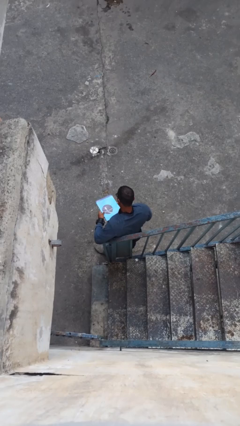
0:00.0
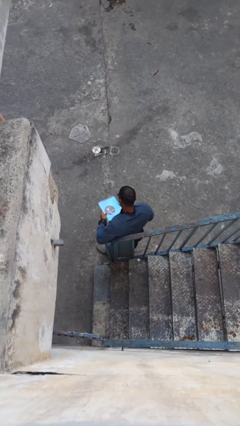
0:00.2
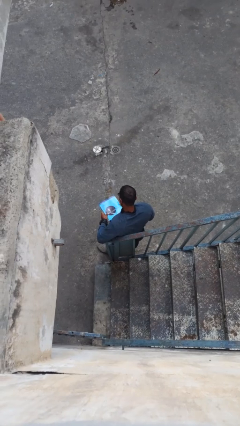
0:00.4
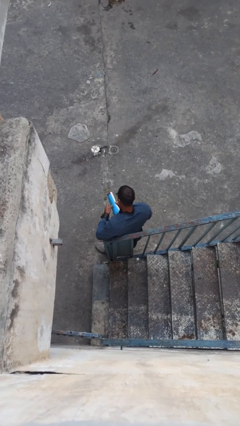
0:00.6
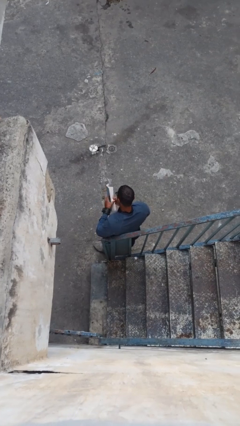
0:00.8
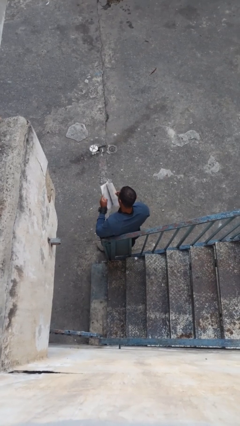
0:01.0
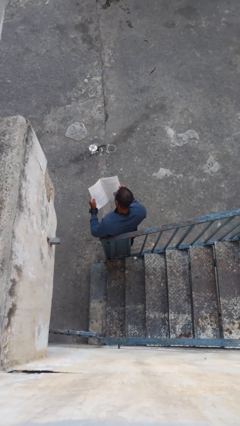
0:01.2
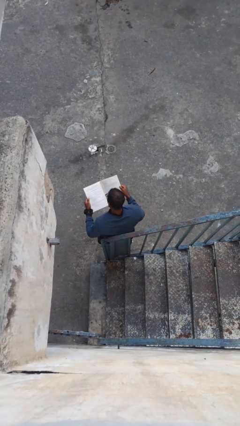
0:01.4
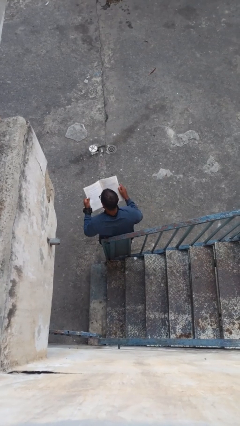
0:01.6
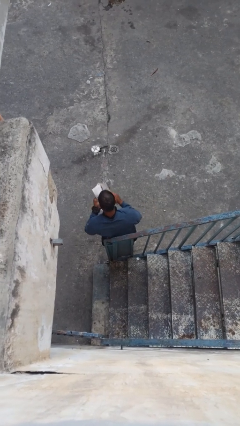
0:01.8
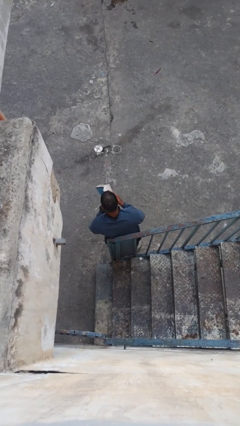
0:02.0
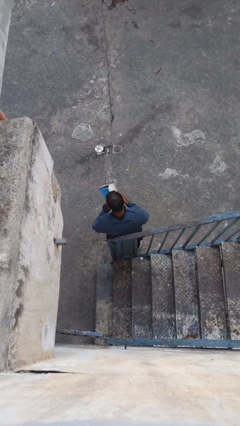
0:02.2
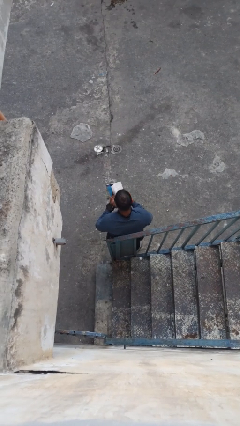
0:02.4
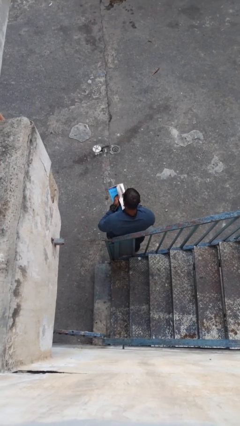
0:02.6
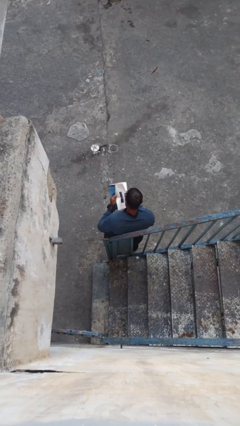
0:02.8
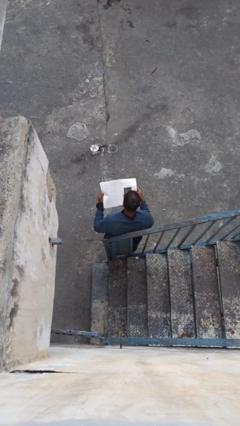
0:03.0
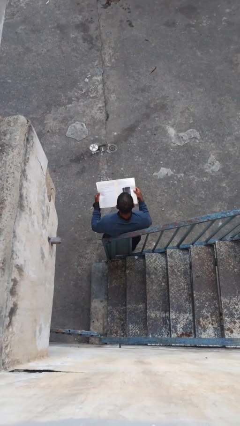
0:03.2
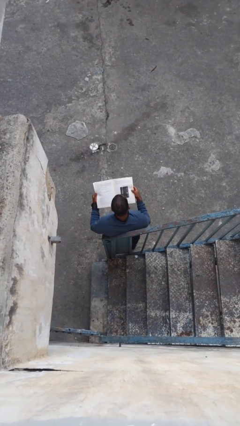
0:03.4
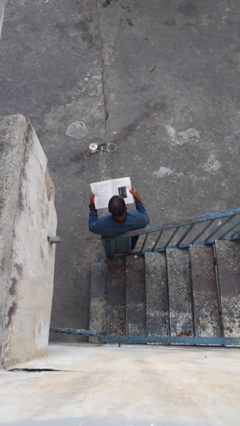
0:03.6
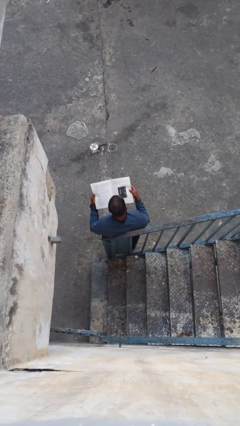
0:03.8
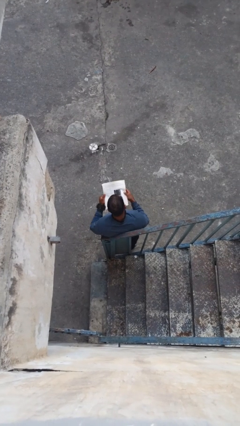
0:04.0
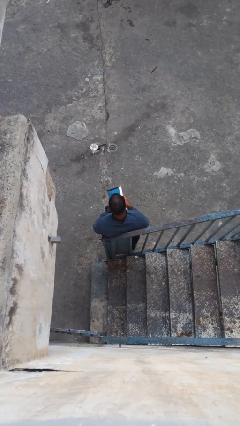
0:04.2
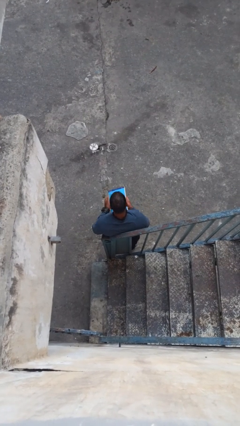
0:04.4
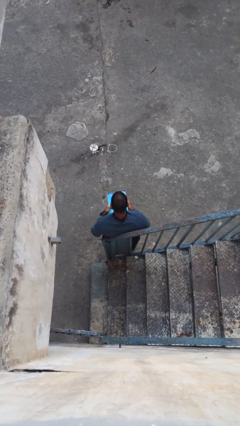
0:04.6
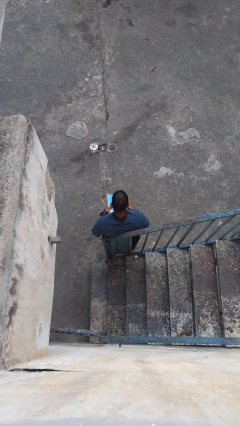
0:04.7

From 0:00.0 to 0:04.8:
person reads document

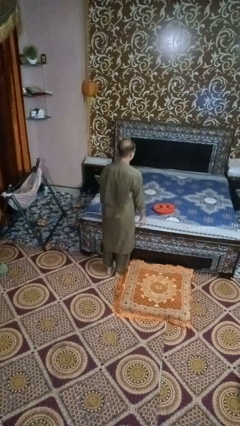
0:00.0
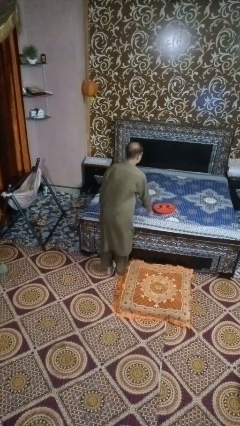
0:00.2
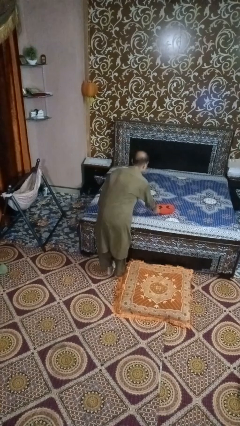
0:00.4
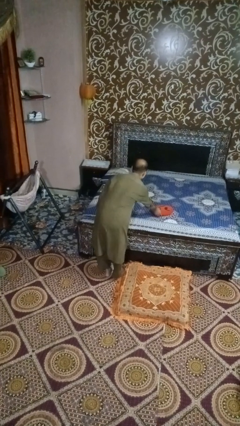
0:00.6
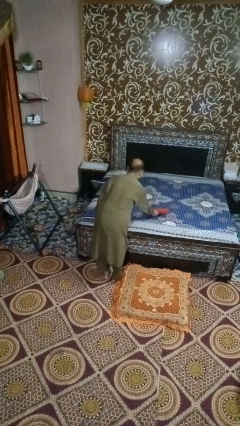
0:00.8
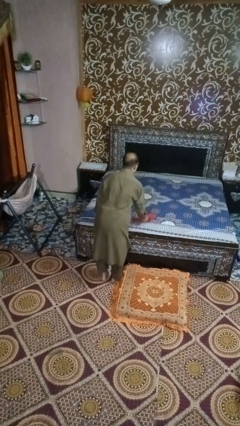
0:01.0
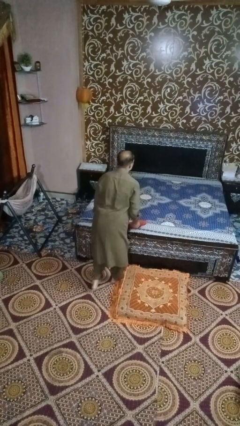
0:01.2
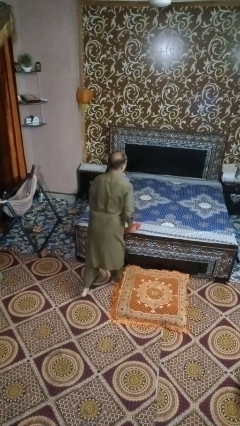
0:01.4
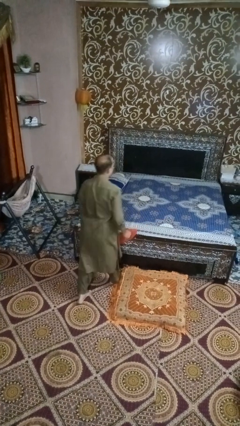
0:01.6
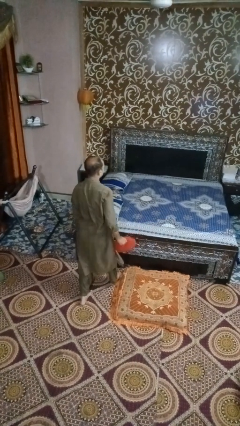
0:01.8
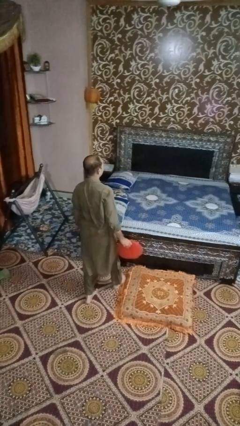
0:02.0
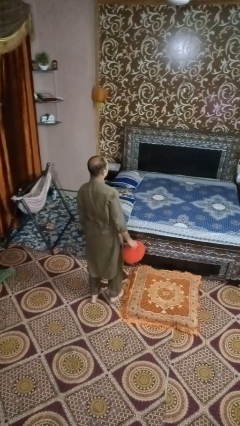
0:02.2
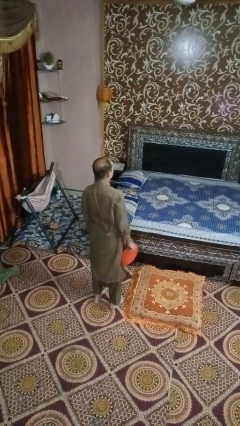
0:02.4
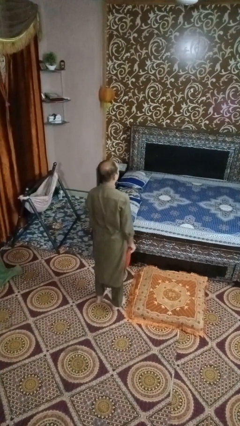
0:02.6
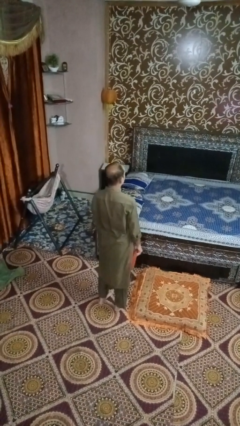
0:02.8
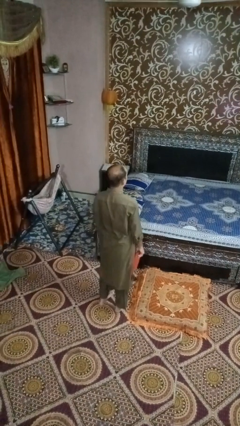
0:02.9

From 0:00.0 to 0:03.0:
person picks up object from bed

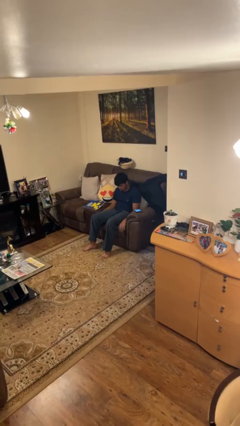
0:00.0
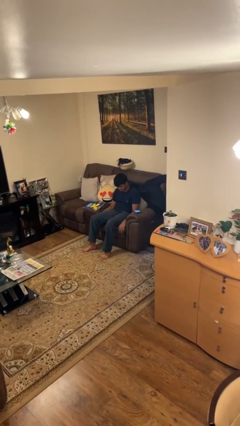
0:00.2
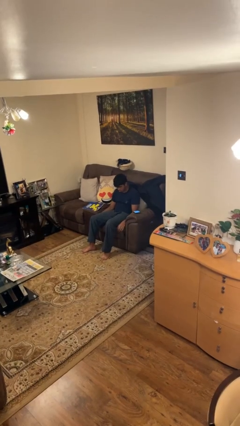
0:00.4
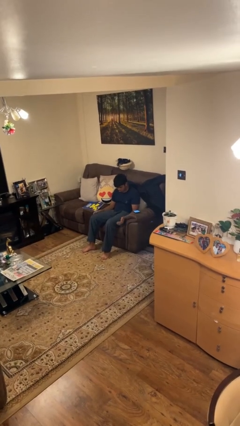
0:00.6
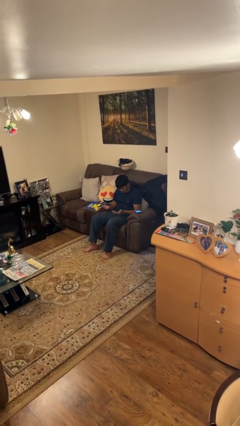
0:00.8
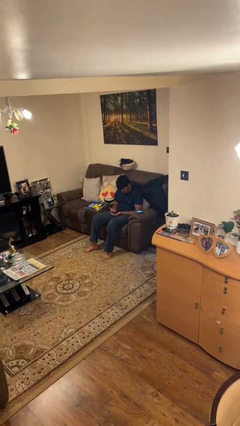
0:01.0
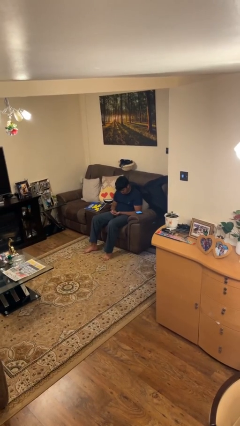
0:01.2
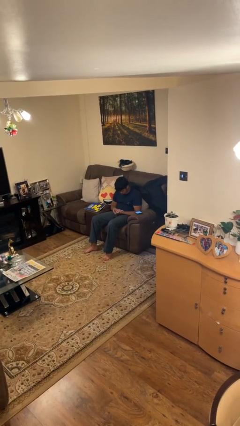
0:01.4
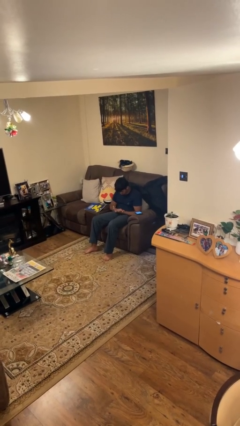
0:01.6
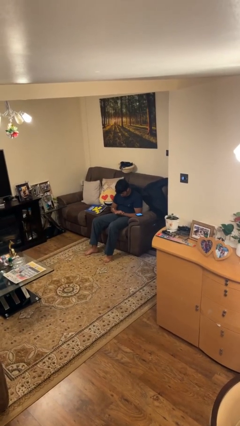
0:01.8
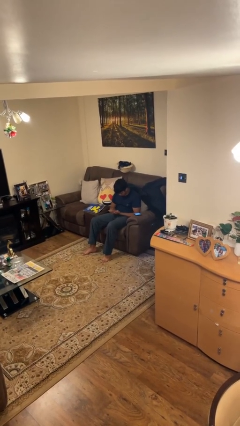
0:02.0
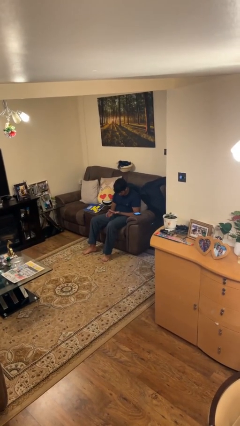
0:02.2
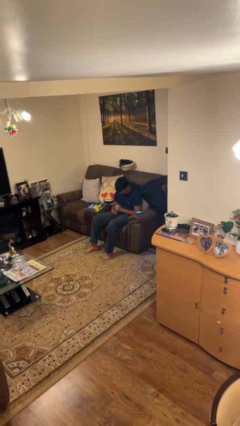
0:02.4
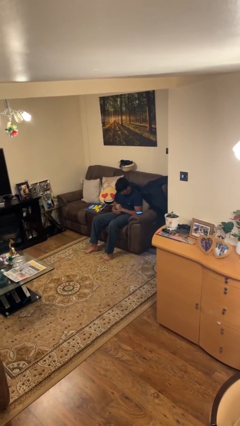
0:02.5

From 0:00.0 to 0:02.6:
person looks at hands in lap

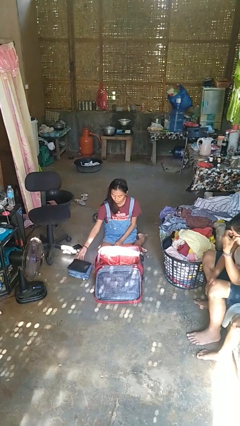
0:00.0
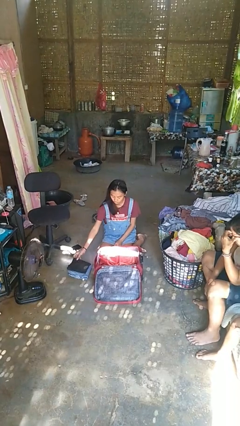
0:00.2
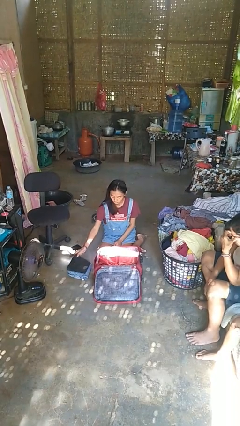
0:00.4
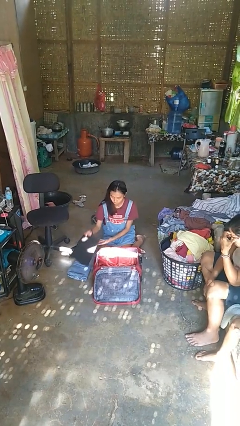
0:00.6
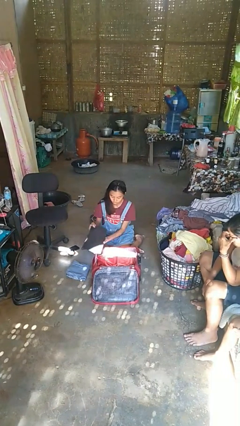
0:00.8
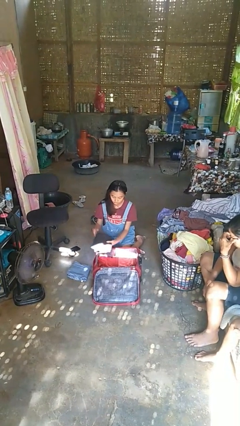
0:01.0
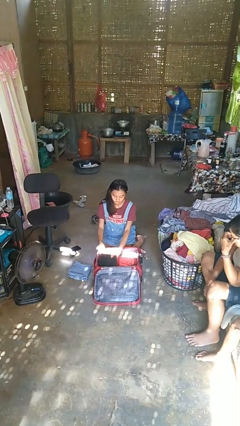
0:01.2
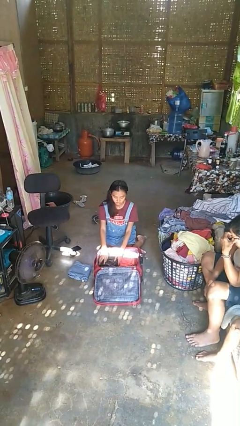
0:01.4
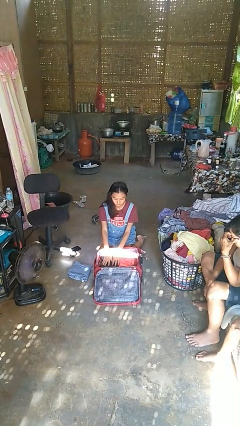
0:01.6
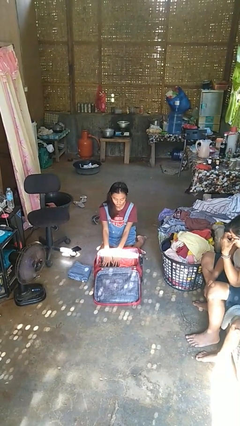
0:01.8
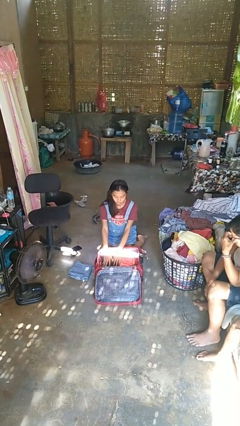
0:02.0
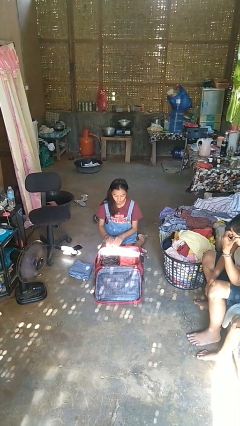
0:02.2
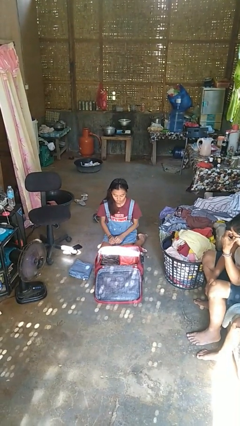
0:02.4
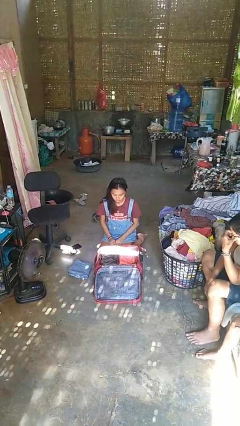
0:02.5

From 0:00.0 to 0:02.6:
person loads clothes into suitcase

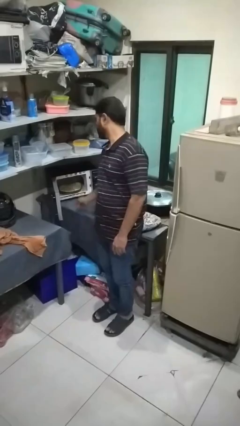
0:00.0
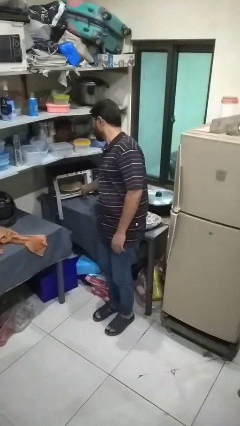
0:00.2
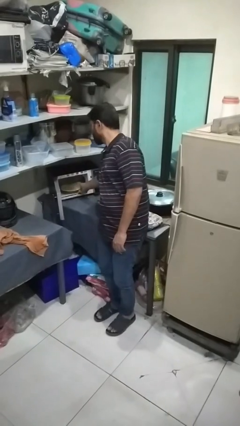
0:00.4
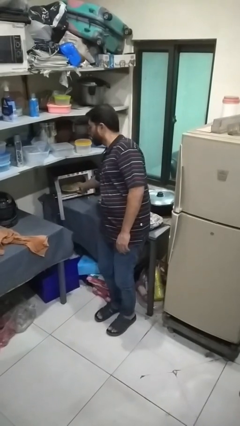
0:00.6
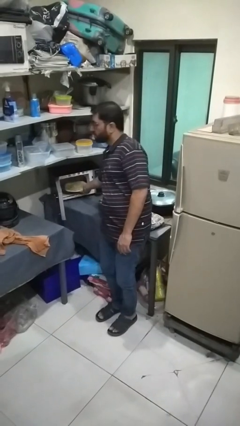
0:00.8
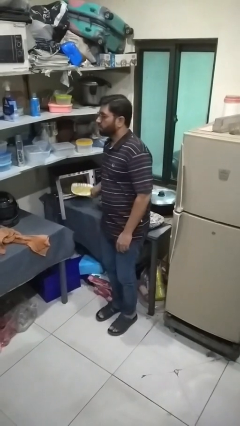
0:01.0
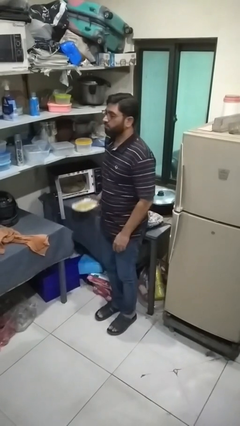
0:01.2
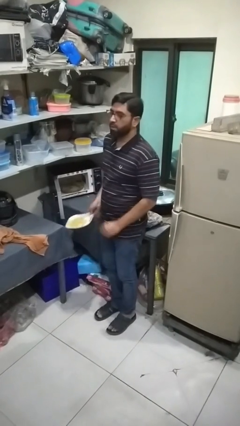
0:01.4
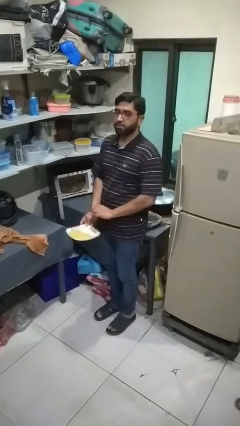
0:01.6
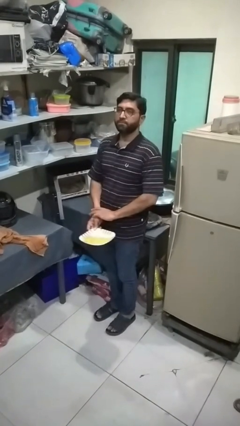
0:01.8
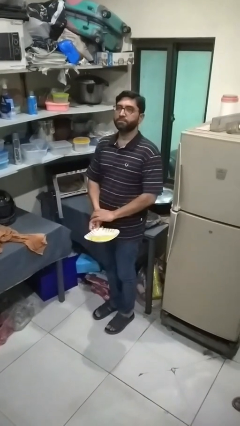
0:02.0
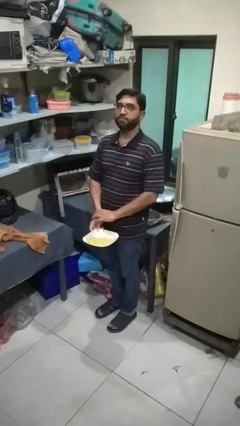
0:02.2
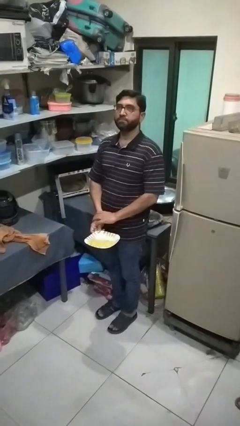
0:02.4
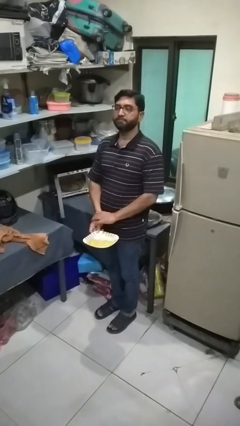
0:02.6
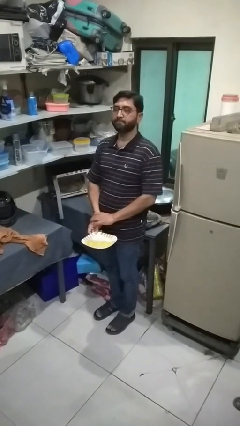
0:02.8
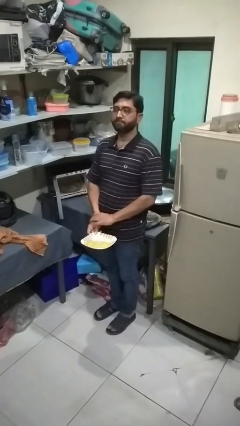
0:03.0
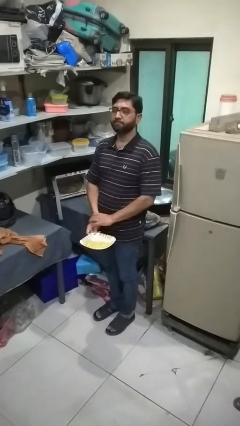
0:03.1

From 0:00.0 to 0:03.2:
person takes object from microwave

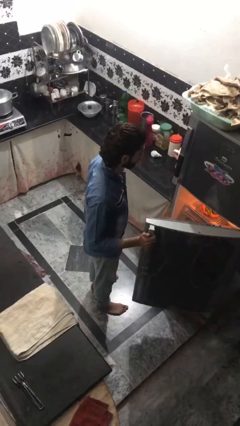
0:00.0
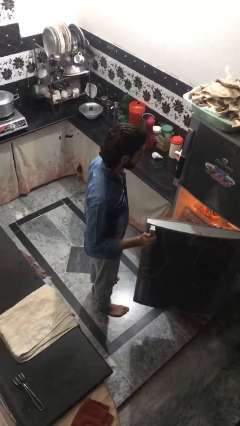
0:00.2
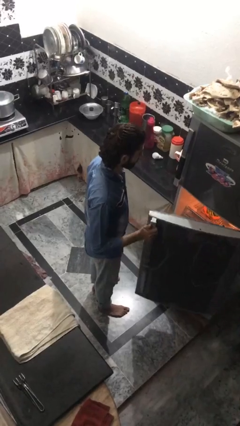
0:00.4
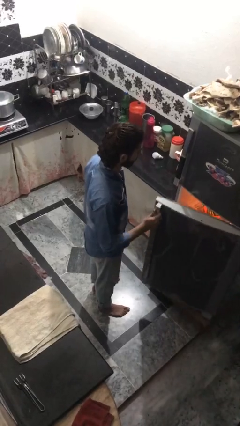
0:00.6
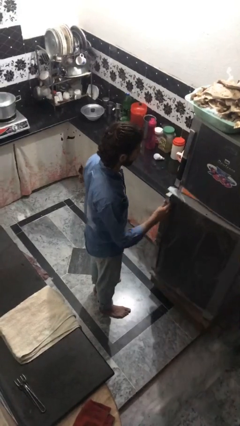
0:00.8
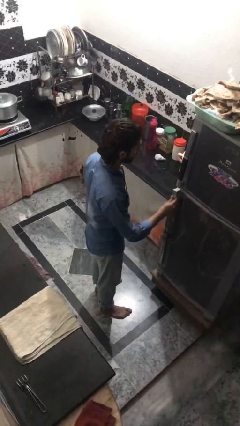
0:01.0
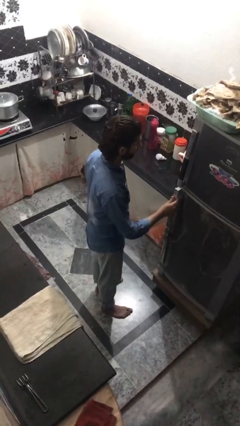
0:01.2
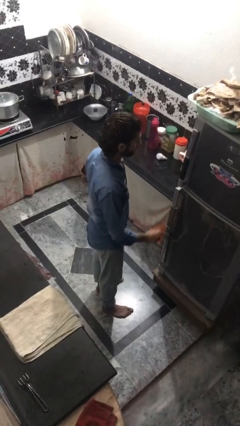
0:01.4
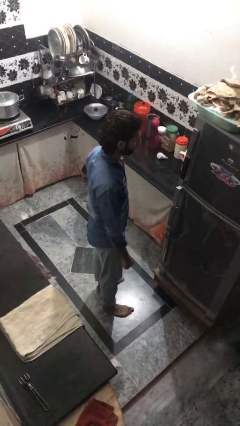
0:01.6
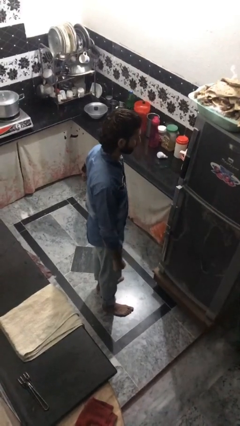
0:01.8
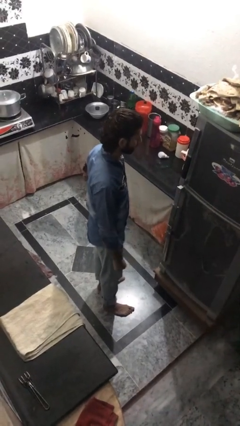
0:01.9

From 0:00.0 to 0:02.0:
person closes refrigerator
